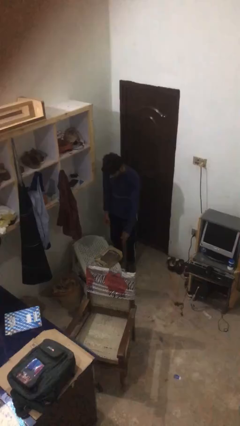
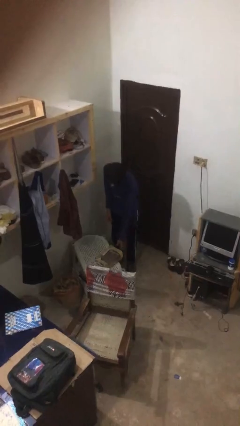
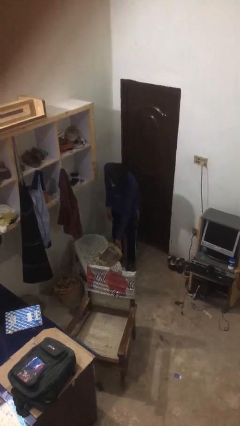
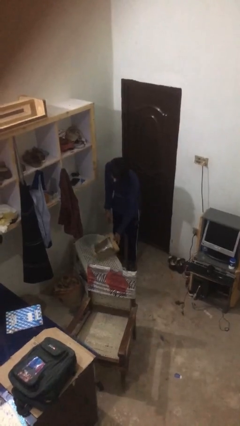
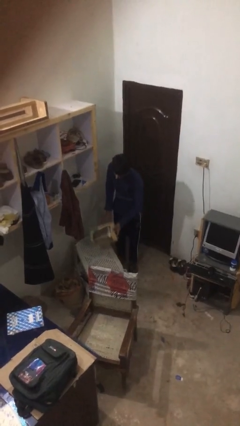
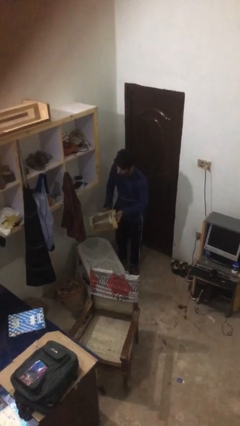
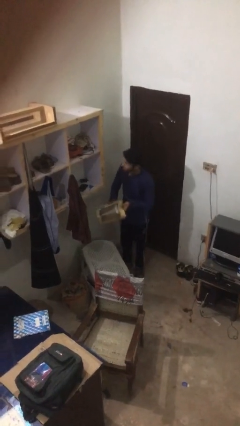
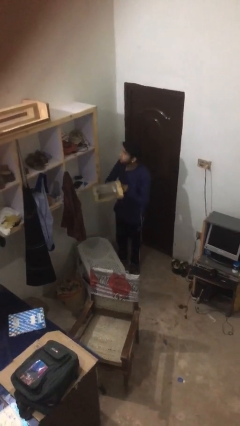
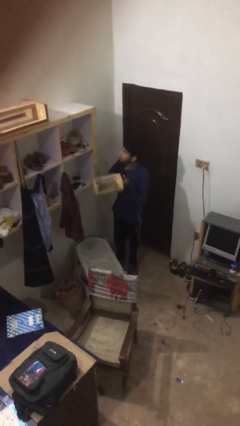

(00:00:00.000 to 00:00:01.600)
person picks up object from table

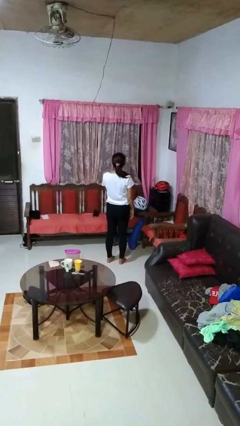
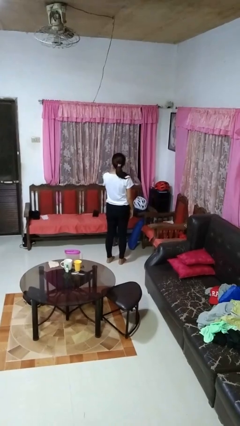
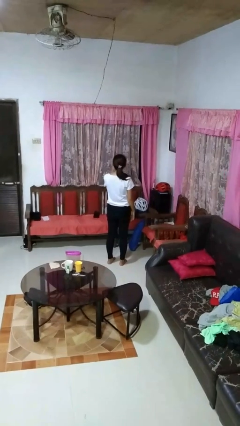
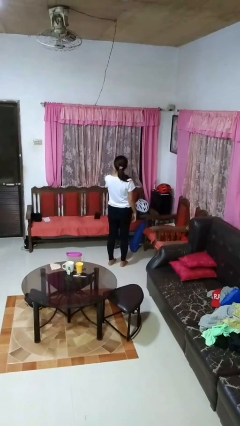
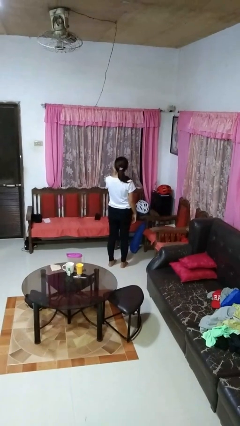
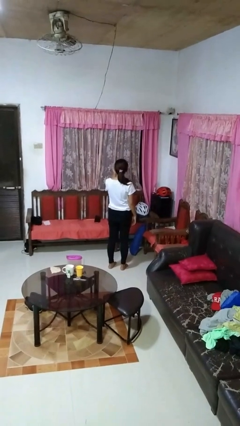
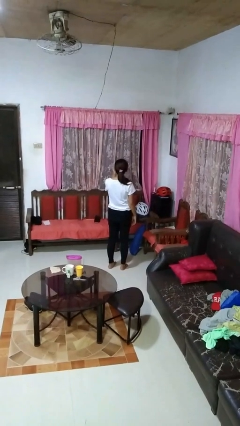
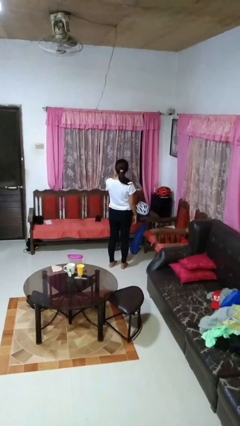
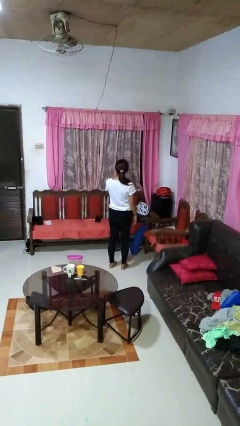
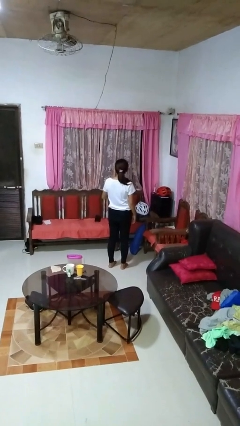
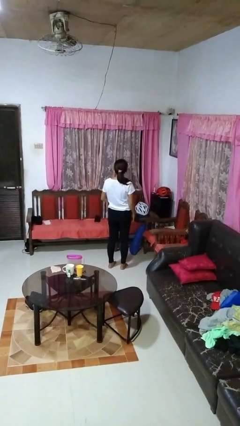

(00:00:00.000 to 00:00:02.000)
person gestures blow kiss

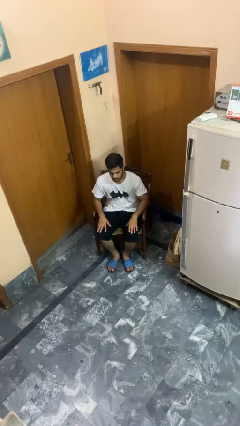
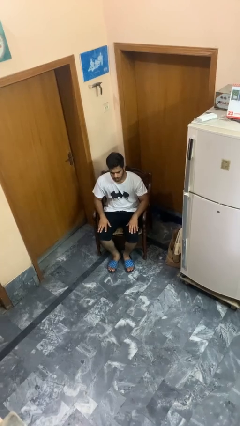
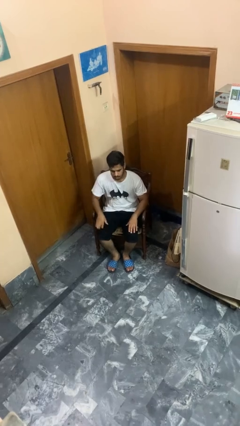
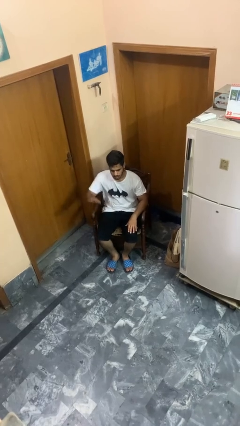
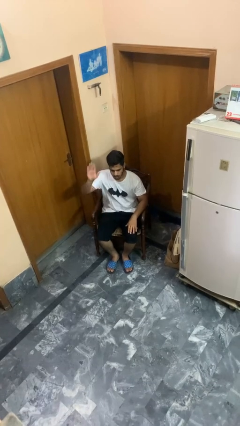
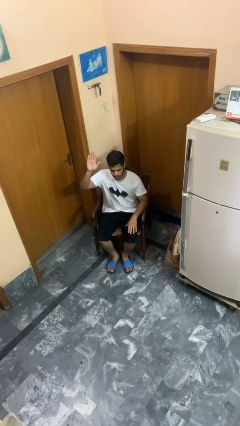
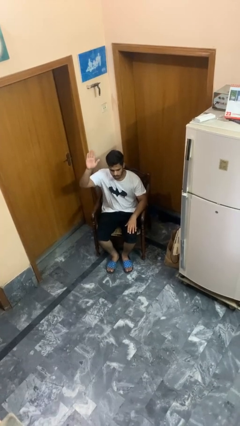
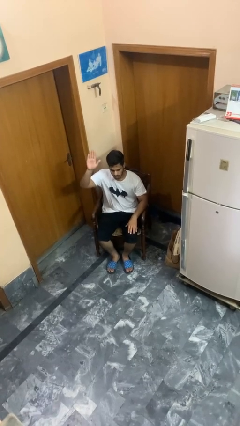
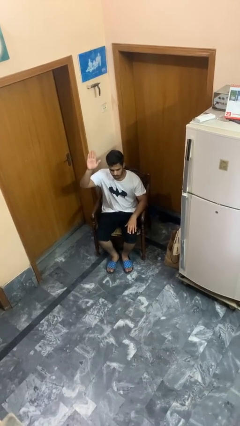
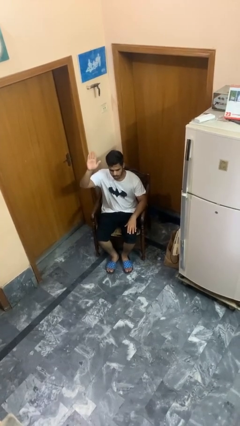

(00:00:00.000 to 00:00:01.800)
person gestures raise hand

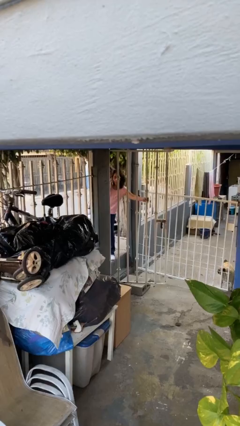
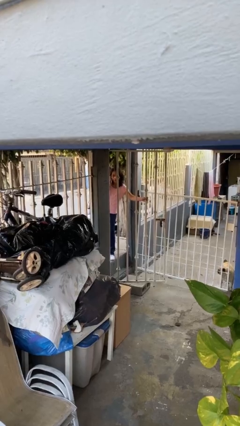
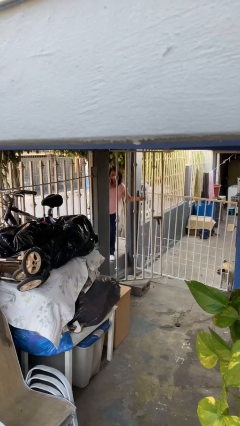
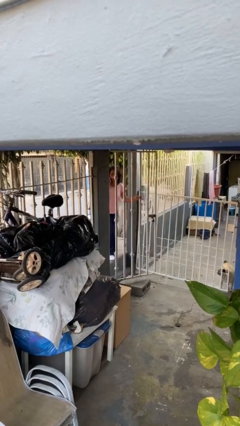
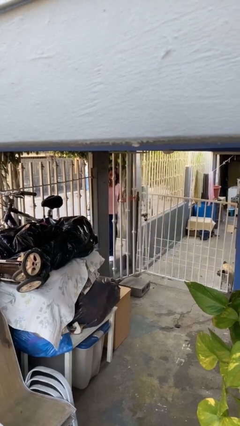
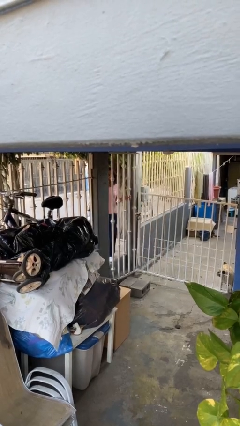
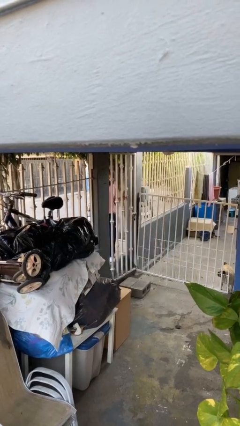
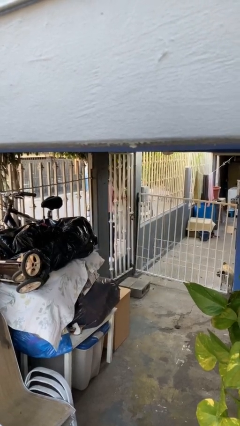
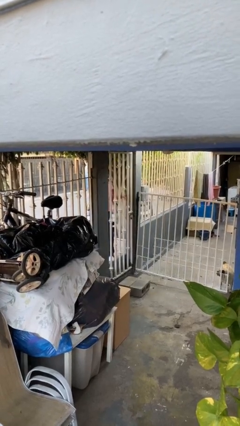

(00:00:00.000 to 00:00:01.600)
person closes facility door

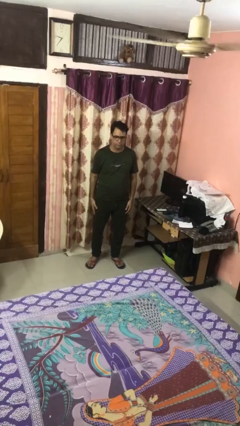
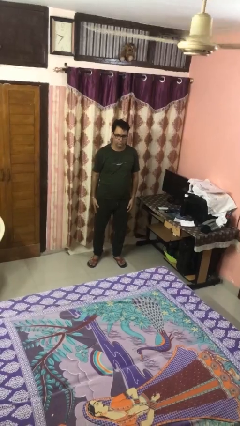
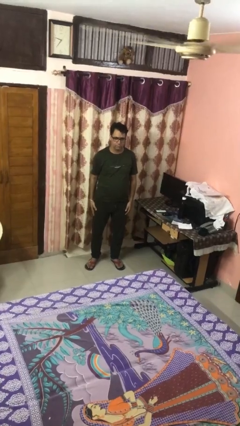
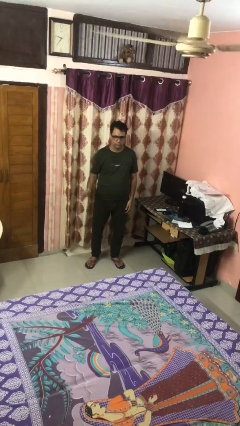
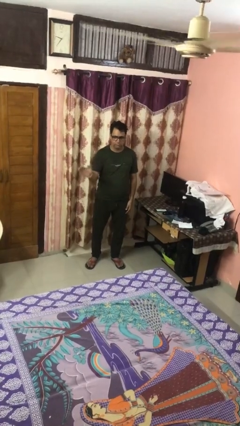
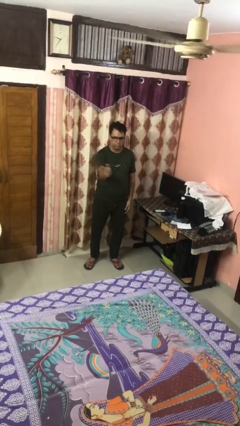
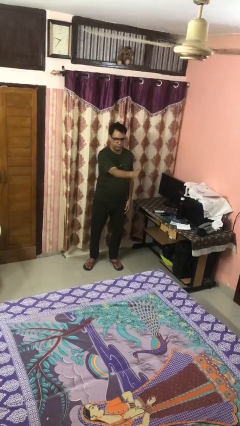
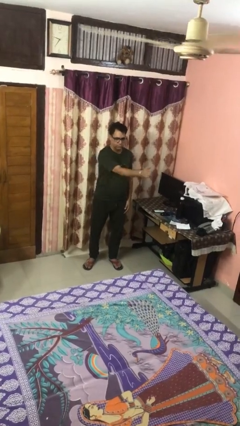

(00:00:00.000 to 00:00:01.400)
person gestures swipe left

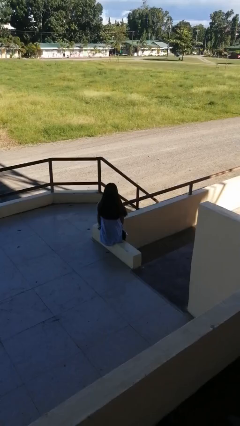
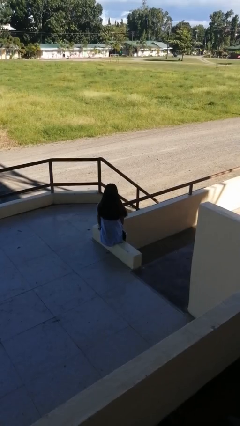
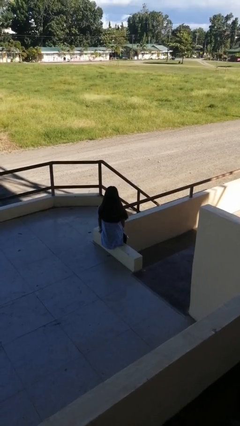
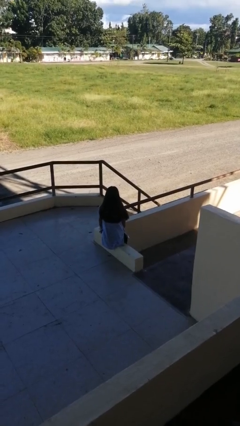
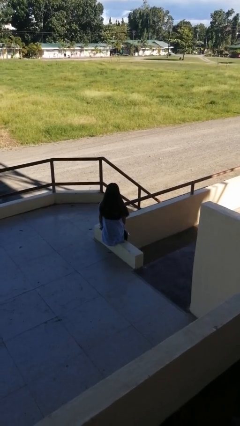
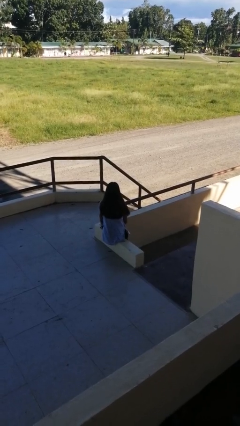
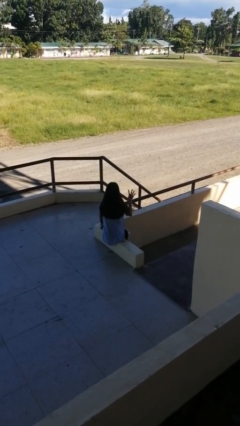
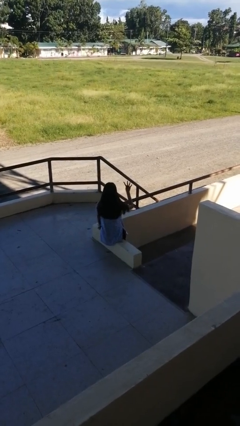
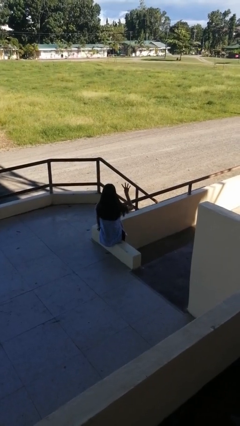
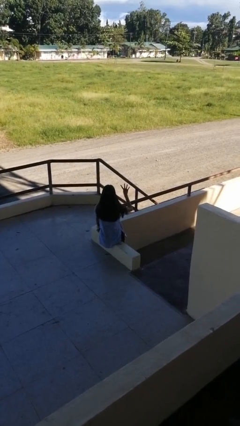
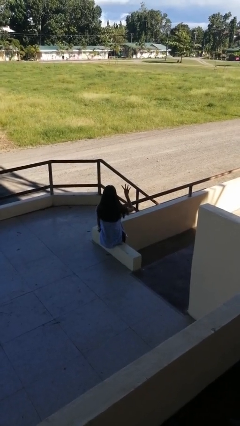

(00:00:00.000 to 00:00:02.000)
person gestures number four

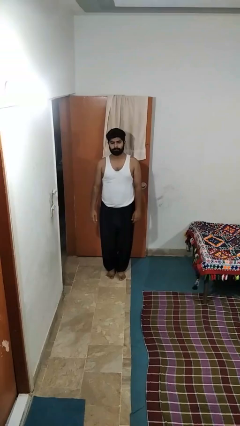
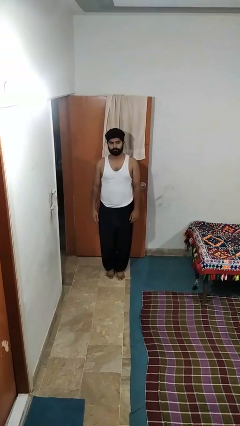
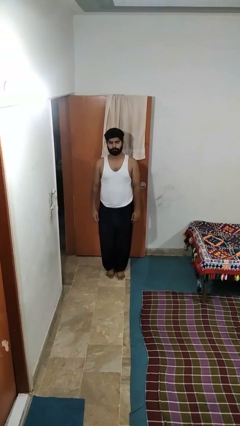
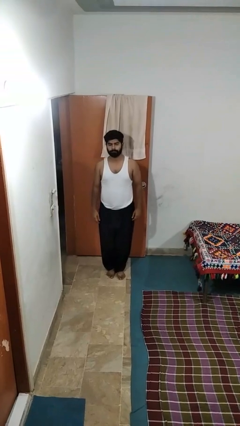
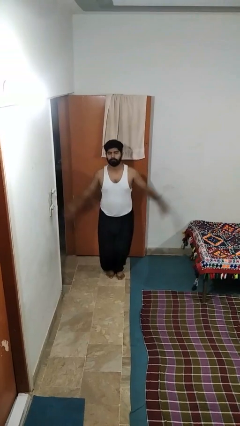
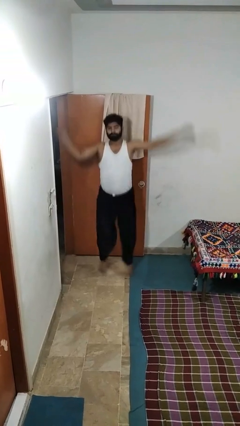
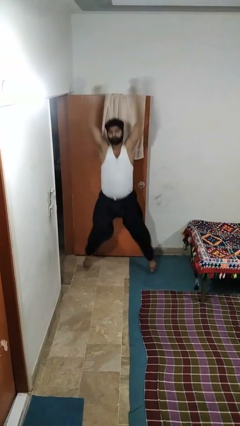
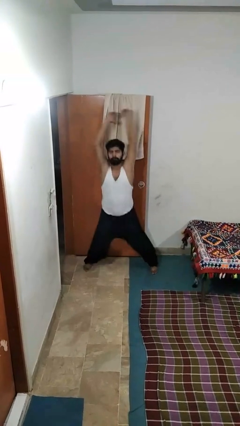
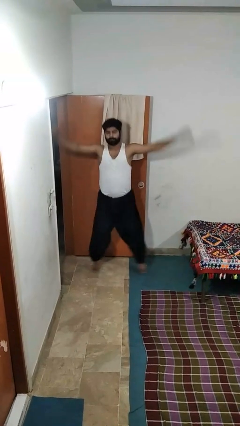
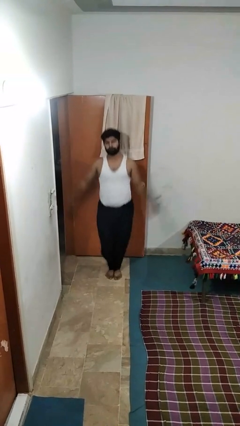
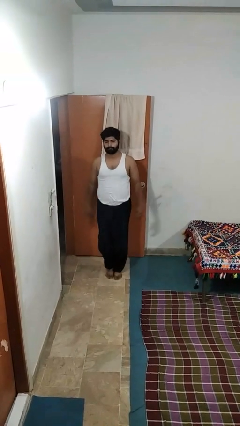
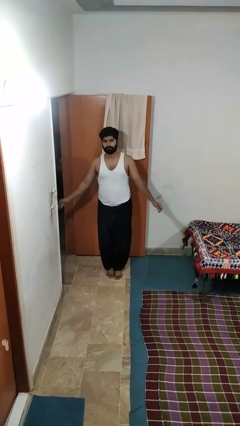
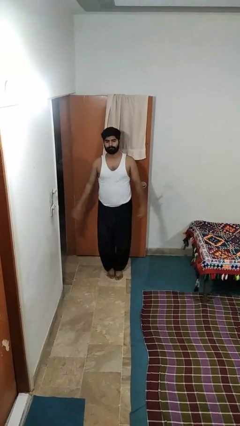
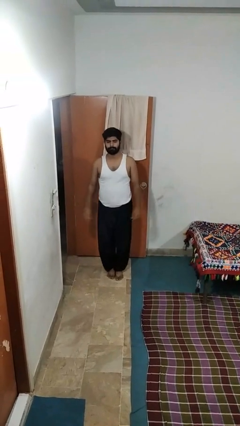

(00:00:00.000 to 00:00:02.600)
person exercises with jumping jacks

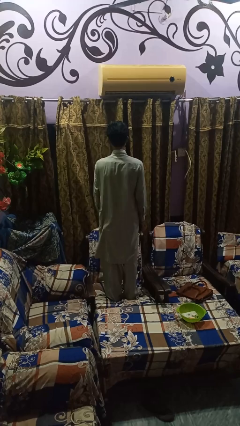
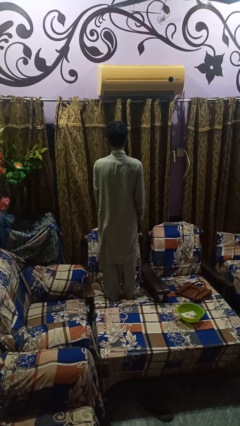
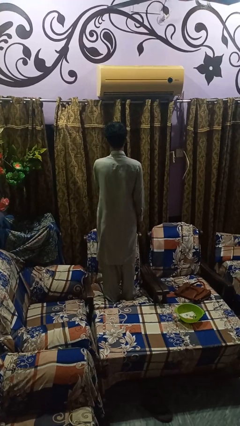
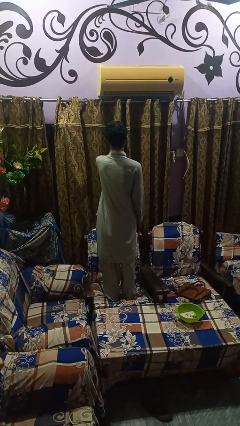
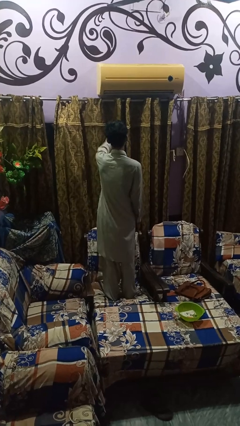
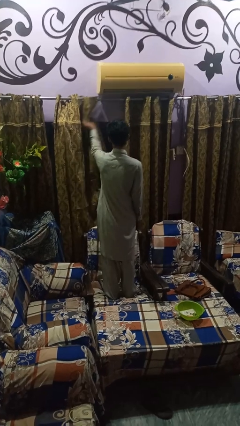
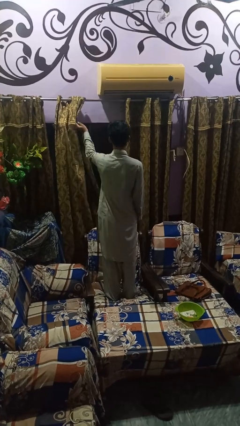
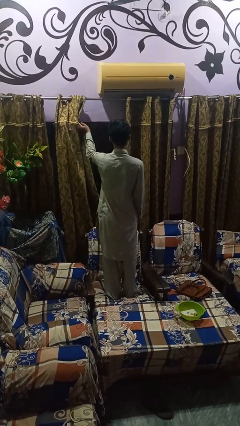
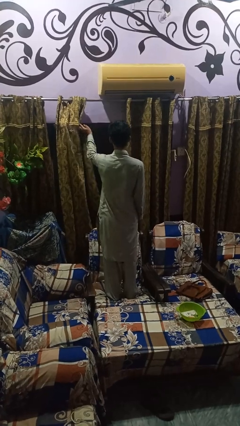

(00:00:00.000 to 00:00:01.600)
person opens curtains

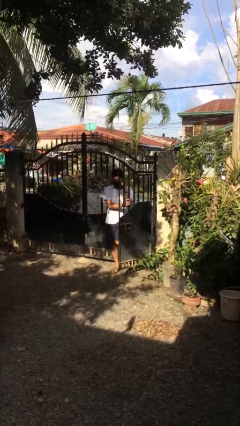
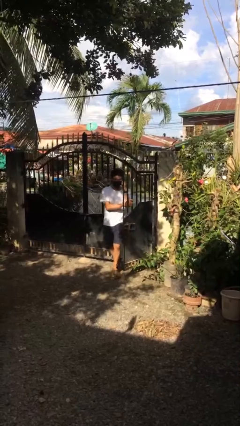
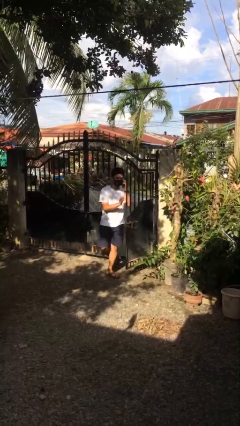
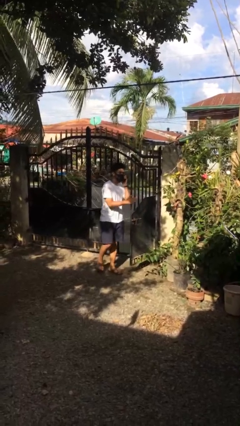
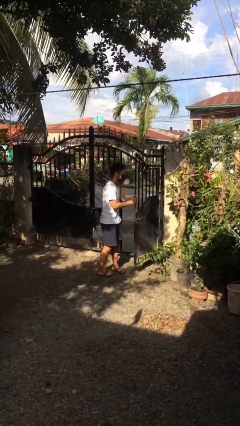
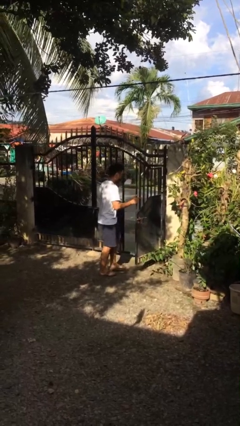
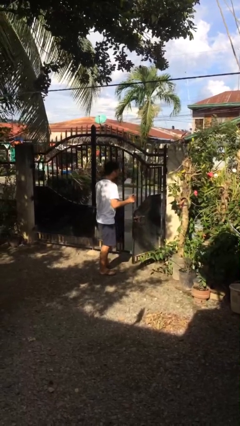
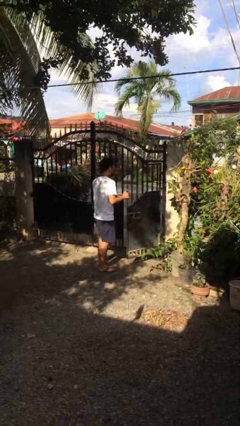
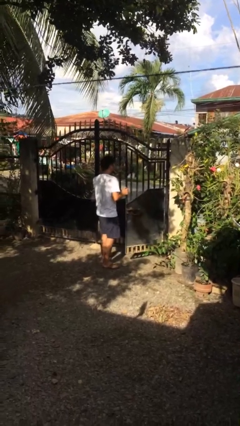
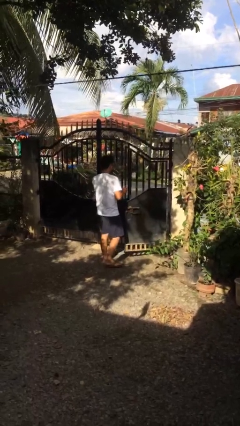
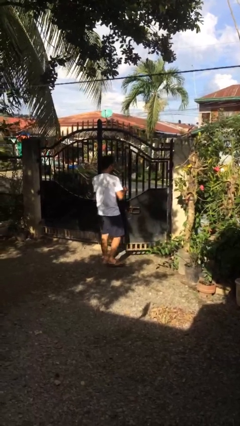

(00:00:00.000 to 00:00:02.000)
person enters scene through structure
